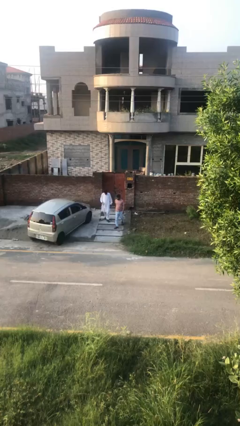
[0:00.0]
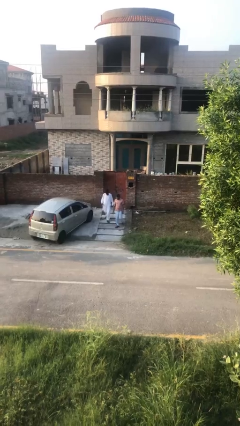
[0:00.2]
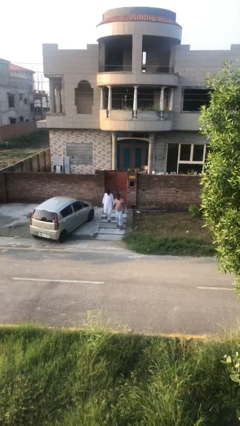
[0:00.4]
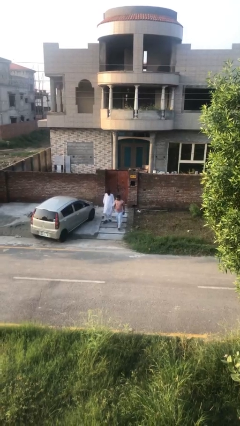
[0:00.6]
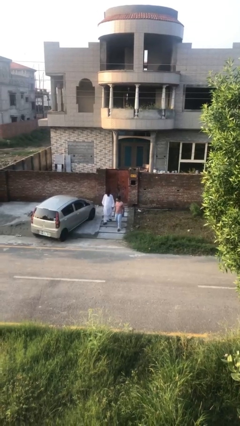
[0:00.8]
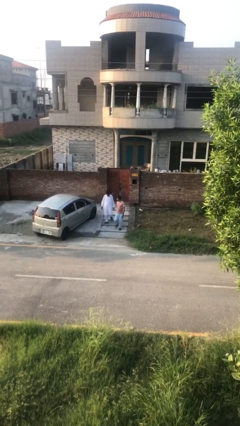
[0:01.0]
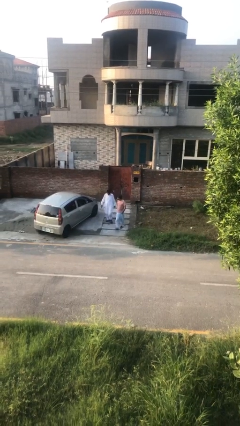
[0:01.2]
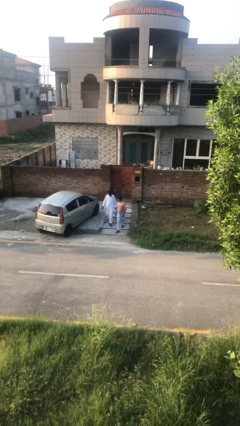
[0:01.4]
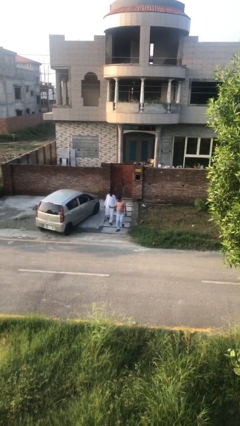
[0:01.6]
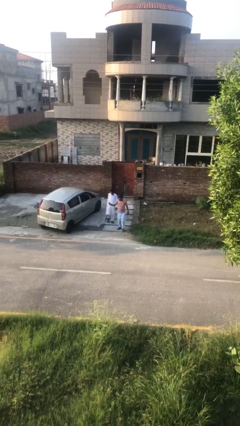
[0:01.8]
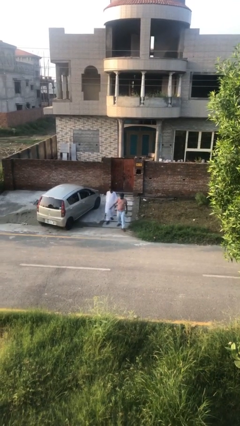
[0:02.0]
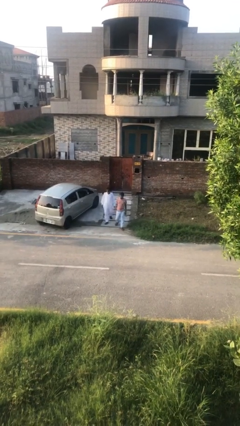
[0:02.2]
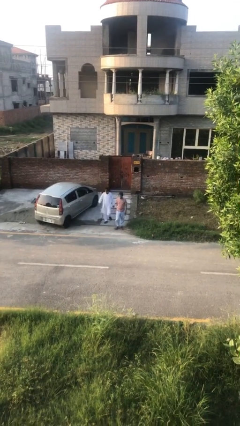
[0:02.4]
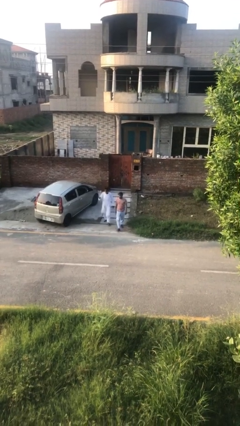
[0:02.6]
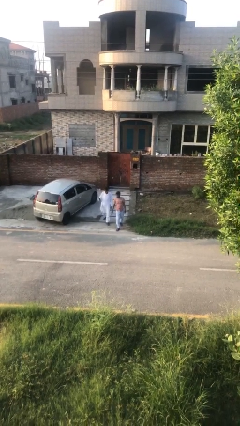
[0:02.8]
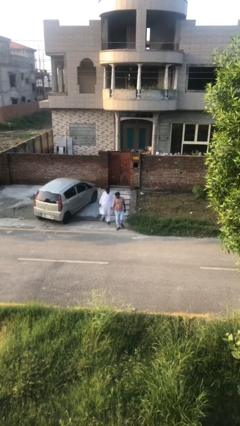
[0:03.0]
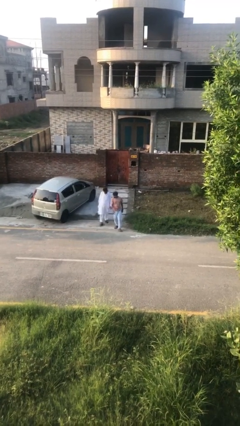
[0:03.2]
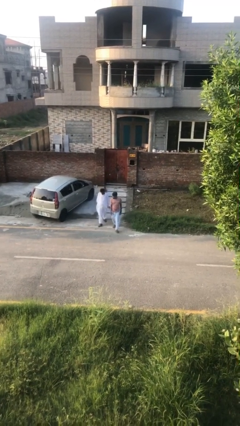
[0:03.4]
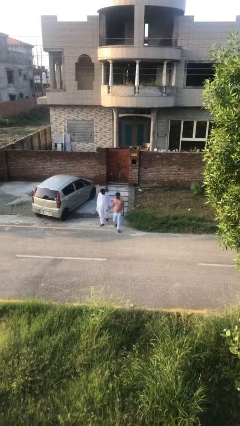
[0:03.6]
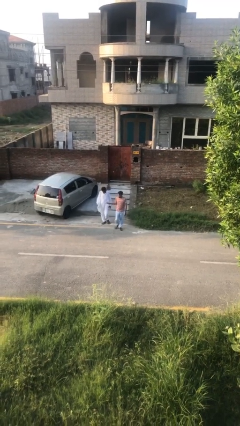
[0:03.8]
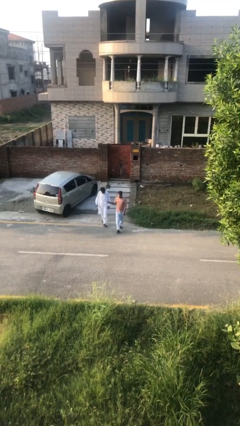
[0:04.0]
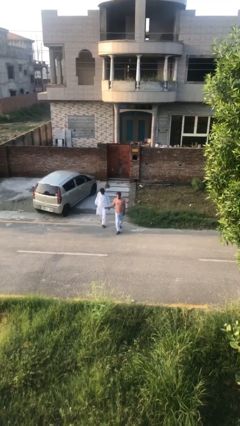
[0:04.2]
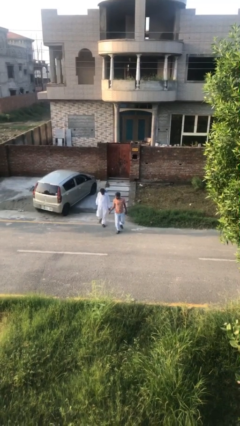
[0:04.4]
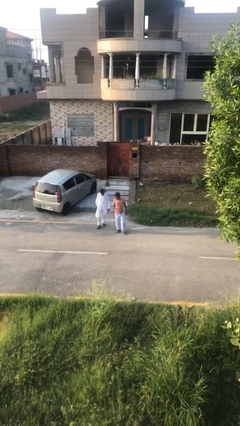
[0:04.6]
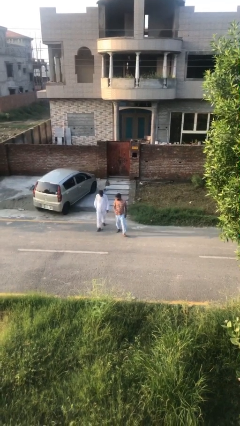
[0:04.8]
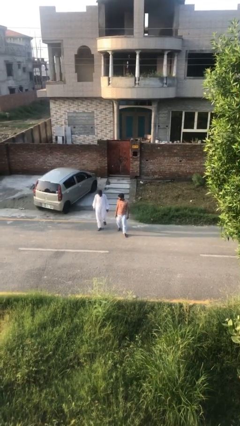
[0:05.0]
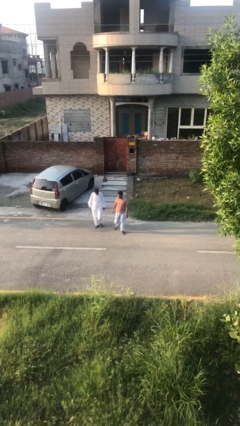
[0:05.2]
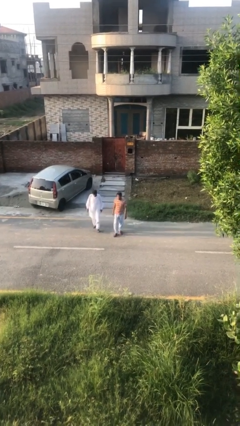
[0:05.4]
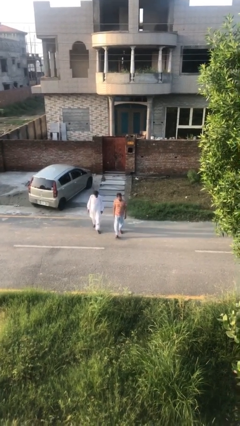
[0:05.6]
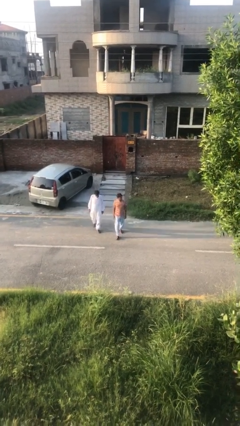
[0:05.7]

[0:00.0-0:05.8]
person talks to person

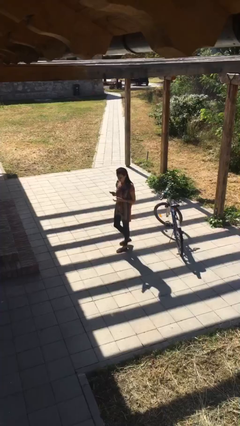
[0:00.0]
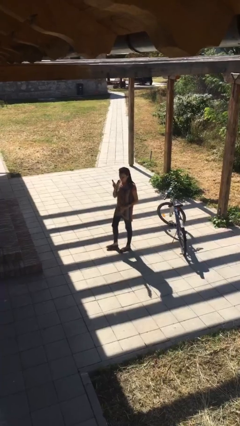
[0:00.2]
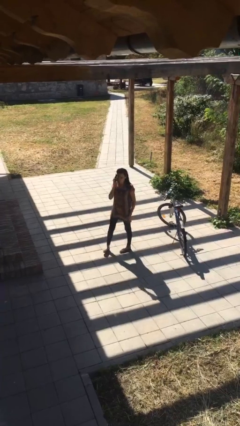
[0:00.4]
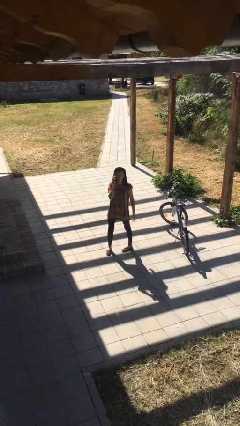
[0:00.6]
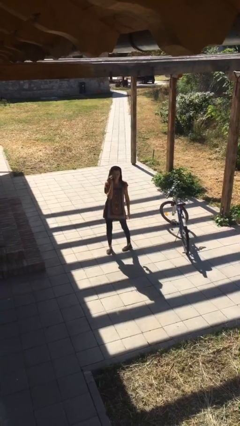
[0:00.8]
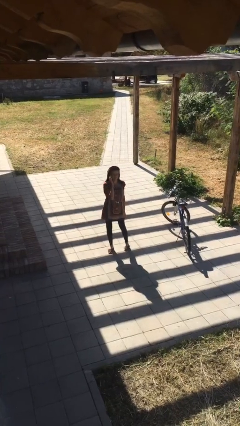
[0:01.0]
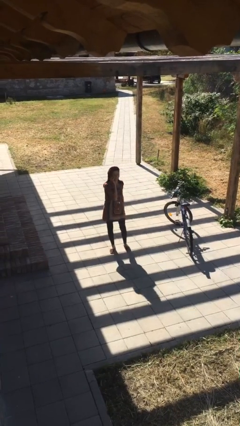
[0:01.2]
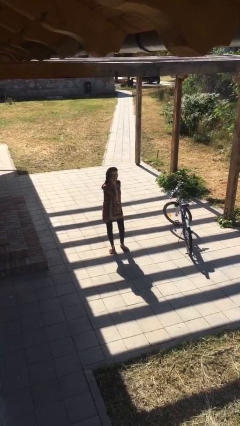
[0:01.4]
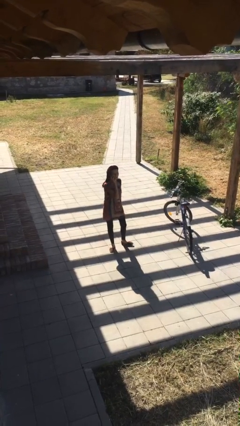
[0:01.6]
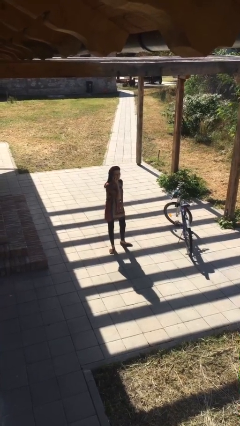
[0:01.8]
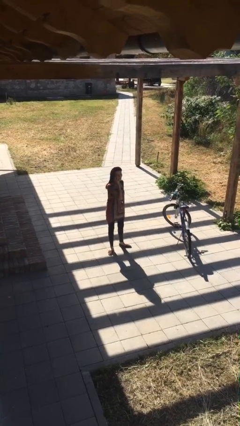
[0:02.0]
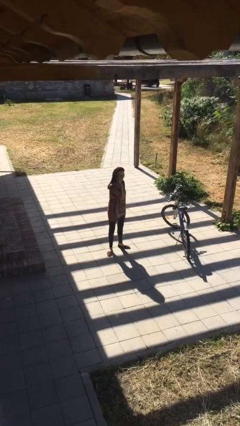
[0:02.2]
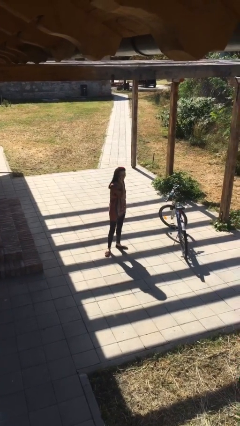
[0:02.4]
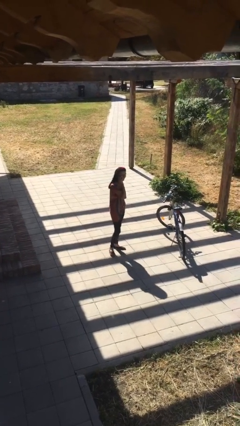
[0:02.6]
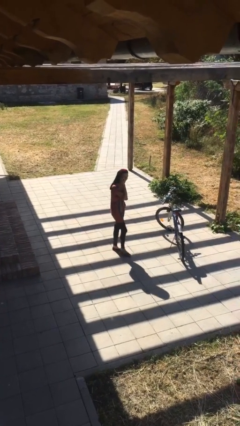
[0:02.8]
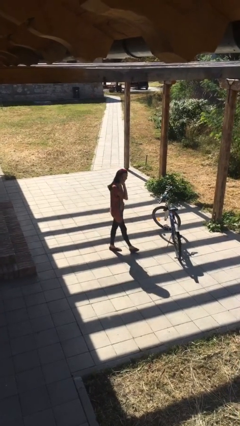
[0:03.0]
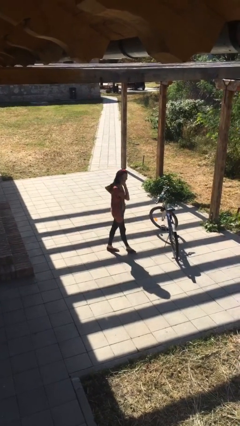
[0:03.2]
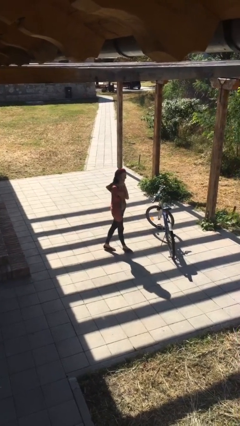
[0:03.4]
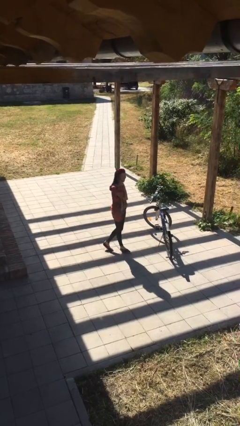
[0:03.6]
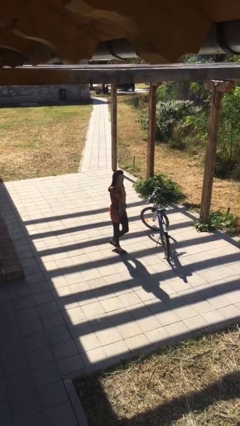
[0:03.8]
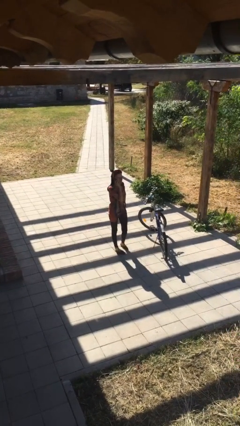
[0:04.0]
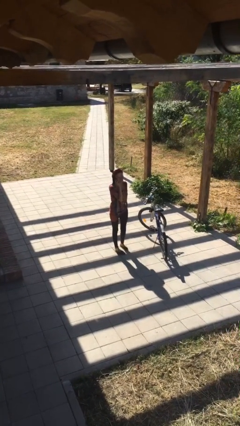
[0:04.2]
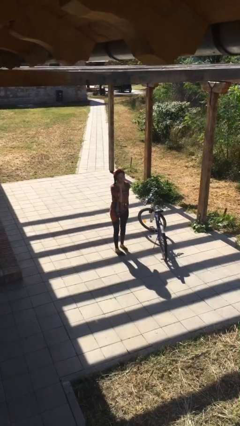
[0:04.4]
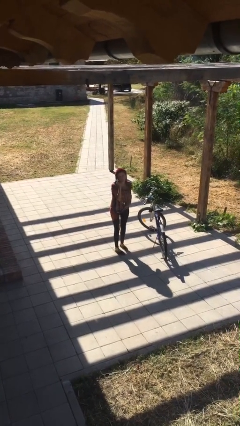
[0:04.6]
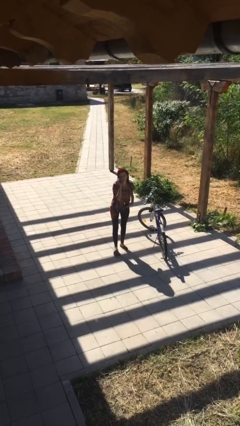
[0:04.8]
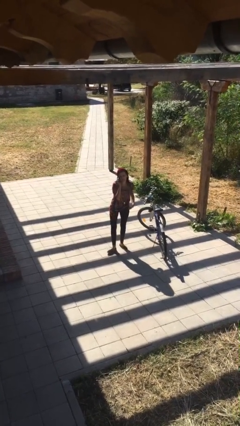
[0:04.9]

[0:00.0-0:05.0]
person talks on phone

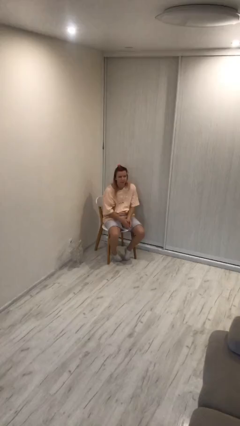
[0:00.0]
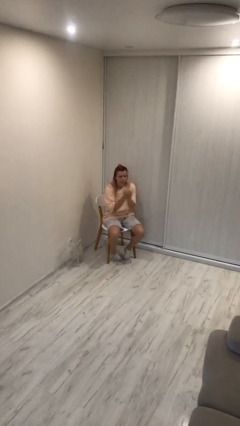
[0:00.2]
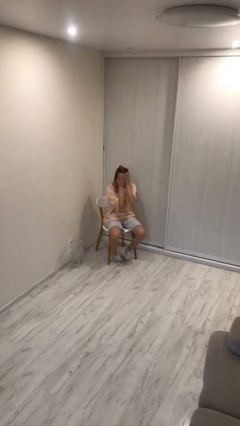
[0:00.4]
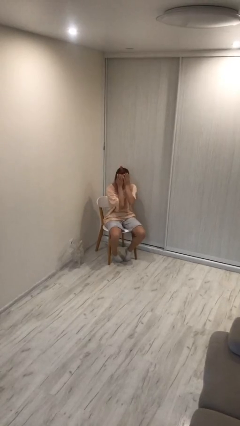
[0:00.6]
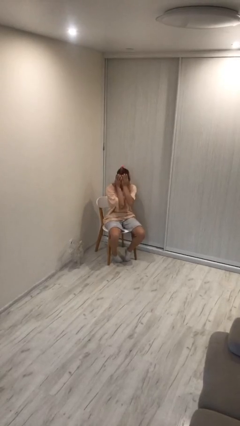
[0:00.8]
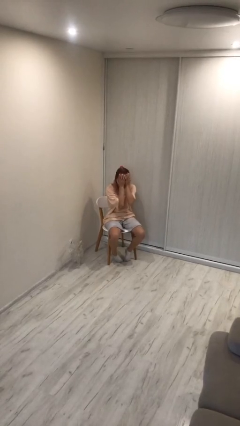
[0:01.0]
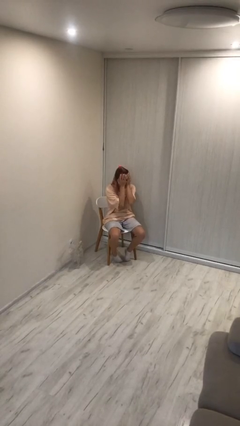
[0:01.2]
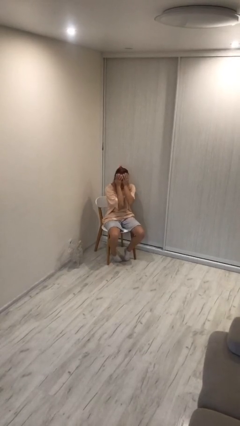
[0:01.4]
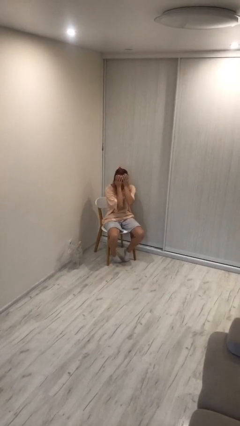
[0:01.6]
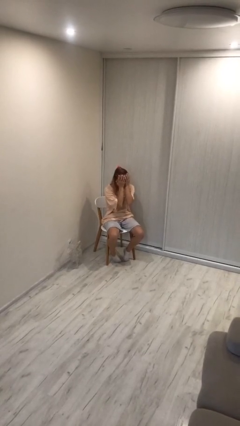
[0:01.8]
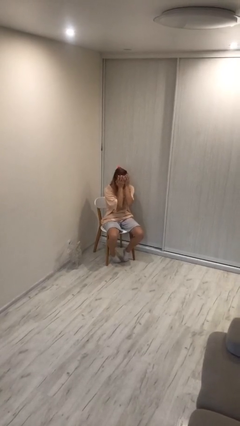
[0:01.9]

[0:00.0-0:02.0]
person covers face with hands

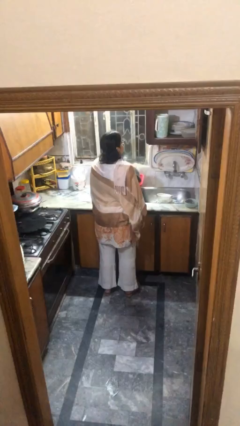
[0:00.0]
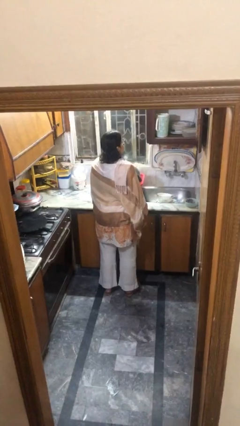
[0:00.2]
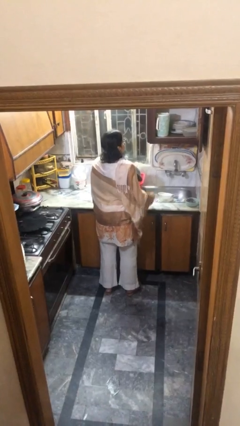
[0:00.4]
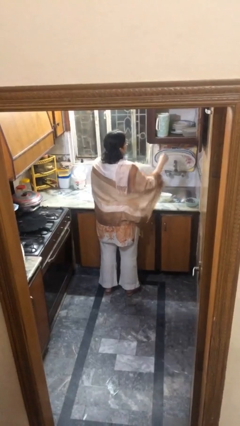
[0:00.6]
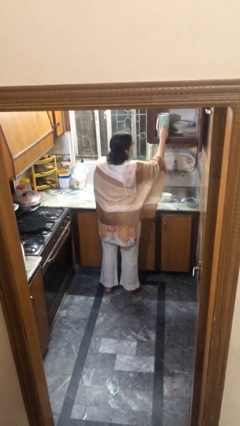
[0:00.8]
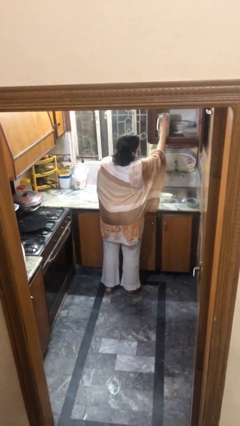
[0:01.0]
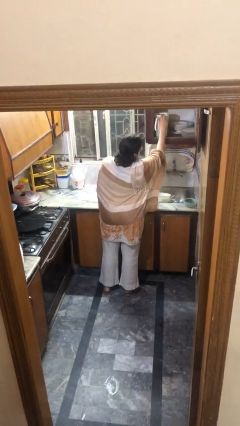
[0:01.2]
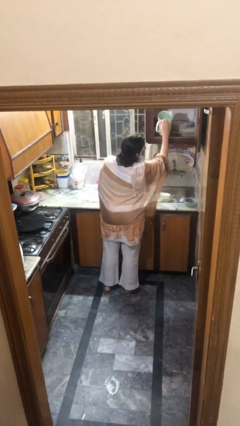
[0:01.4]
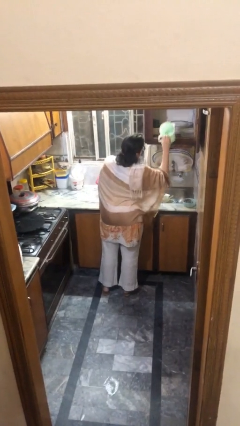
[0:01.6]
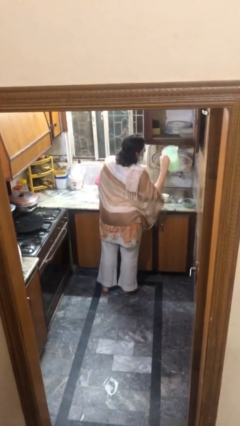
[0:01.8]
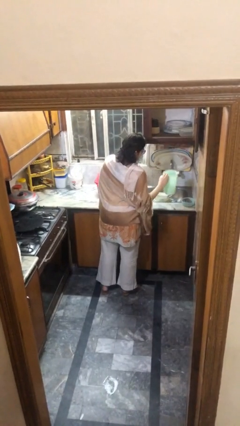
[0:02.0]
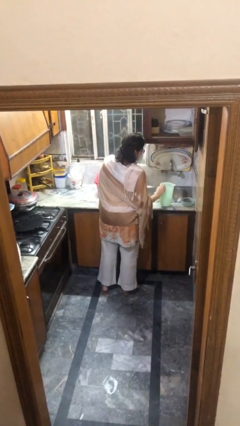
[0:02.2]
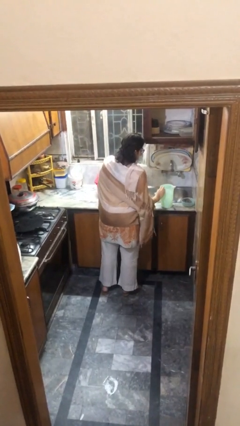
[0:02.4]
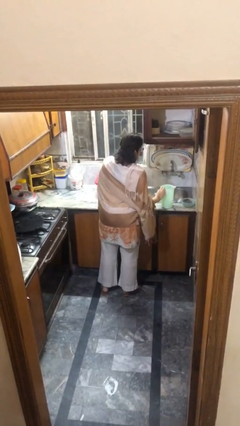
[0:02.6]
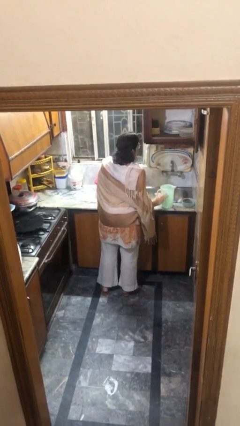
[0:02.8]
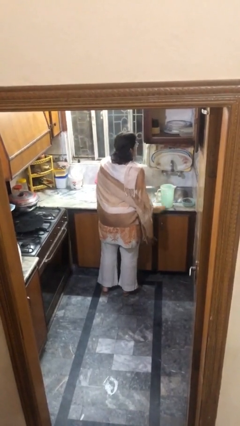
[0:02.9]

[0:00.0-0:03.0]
person takes object from kitchen drawer

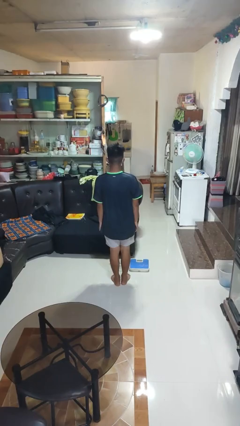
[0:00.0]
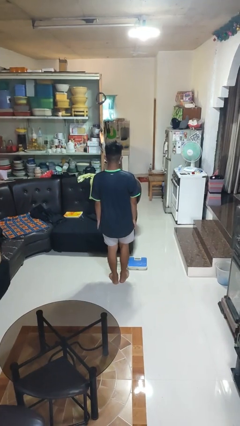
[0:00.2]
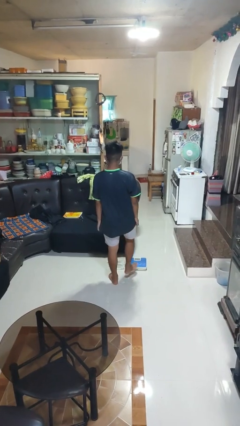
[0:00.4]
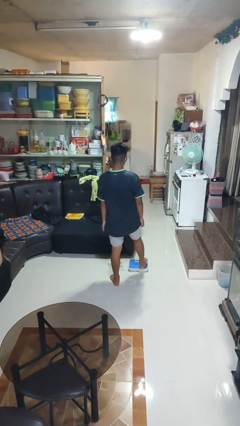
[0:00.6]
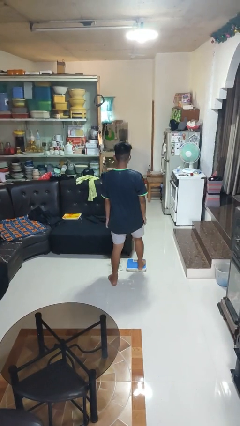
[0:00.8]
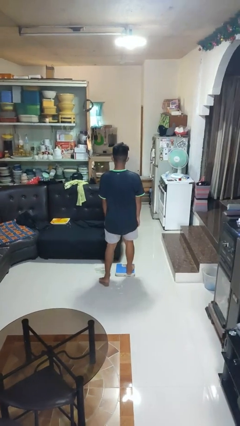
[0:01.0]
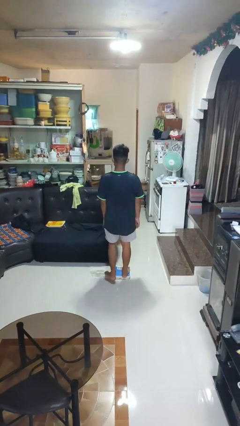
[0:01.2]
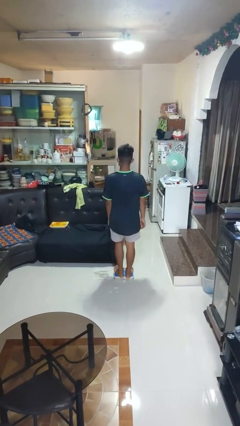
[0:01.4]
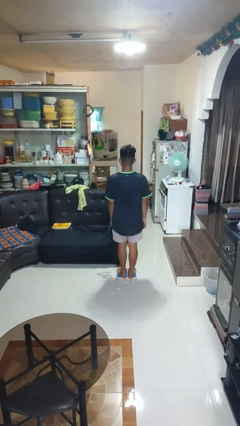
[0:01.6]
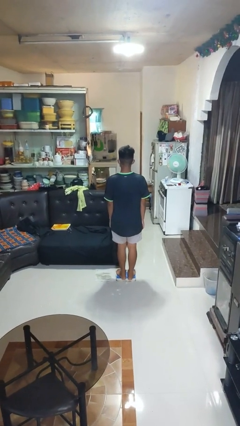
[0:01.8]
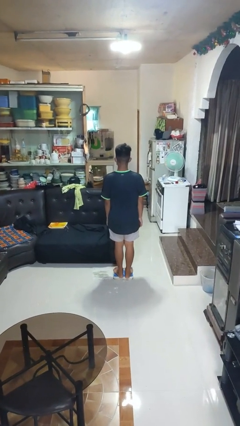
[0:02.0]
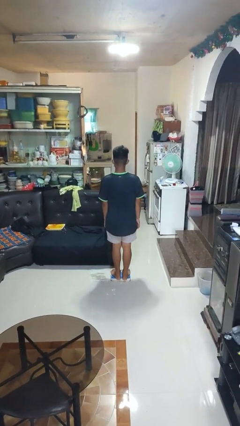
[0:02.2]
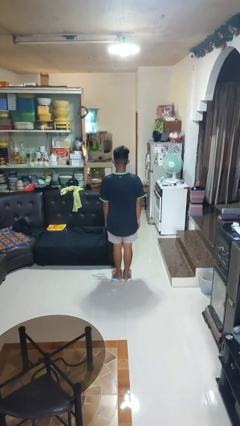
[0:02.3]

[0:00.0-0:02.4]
person uses bodyweight scale
